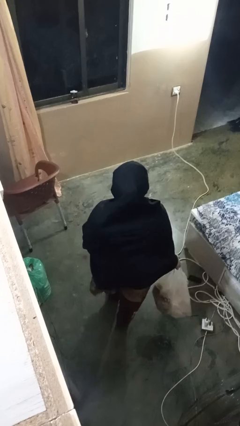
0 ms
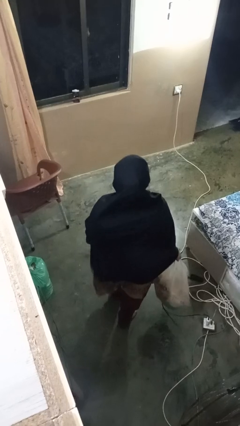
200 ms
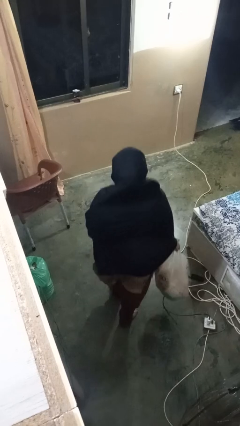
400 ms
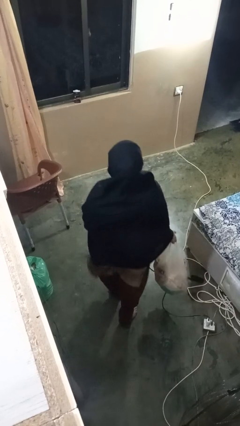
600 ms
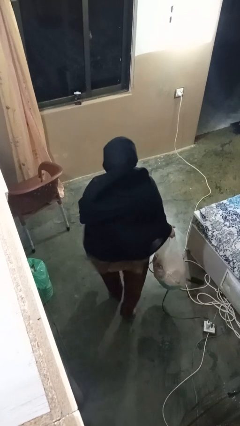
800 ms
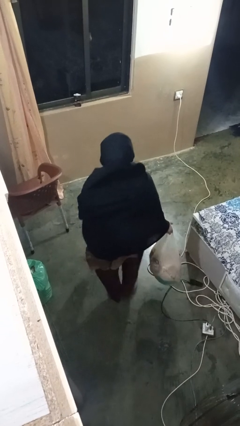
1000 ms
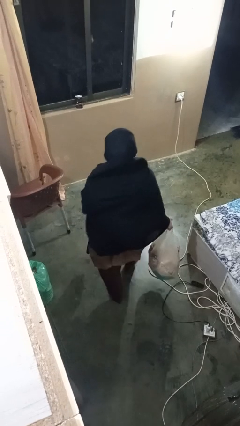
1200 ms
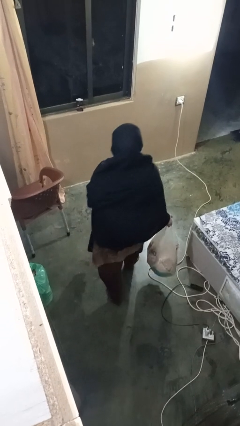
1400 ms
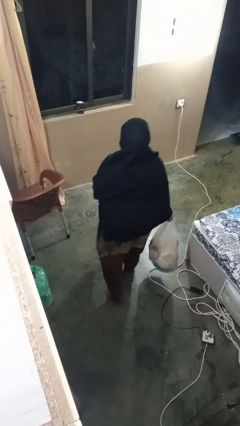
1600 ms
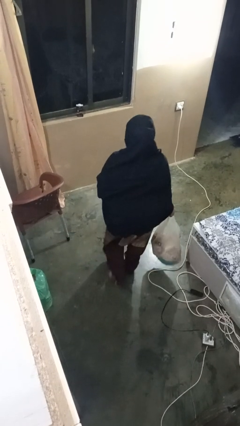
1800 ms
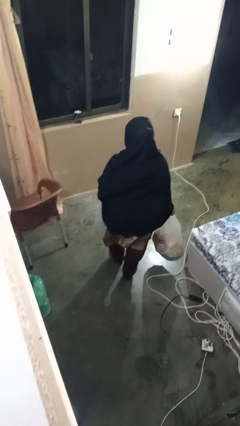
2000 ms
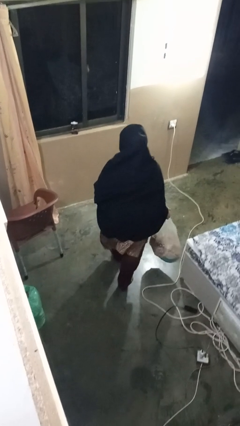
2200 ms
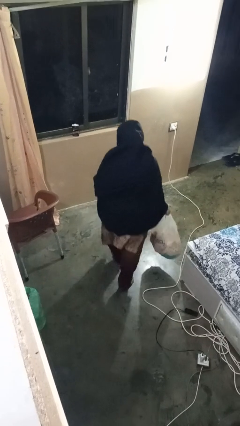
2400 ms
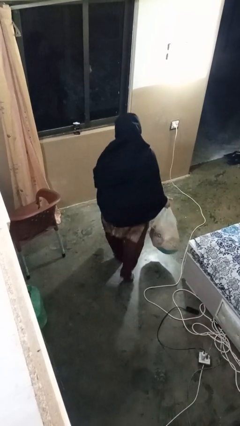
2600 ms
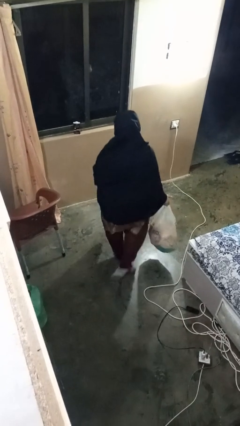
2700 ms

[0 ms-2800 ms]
person carries groceries

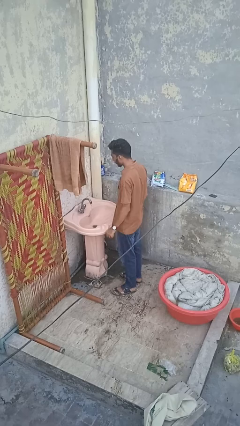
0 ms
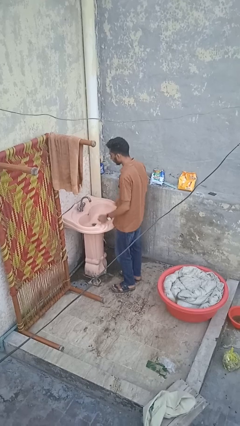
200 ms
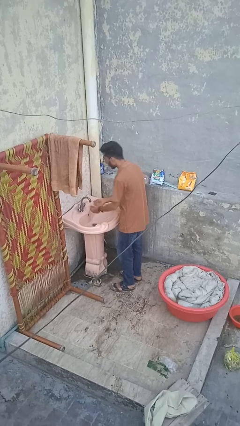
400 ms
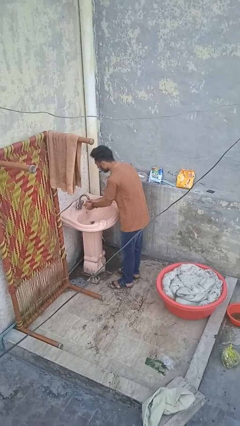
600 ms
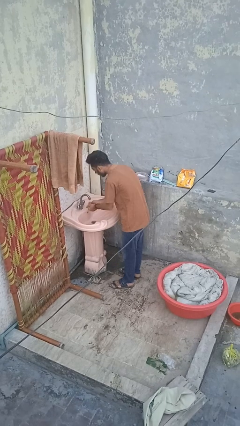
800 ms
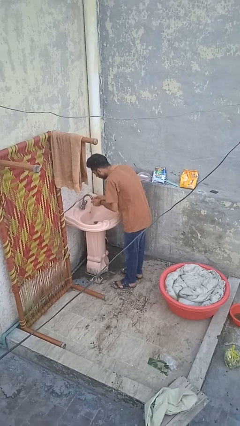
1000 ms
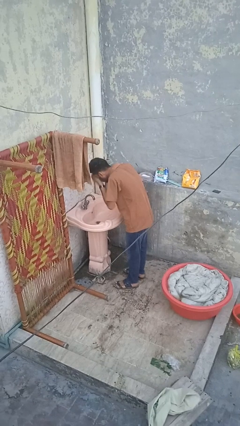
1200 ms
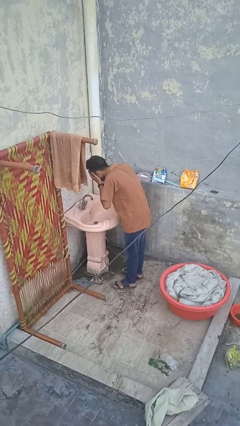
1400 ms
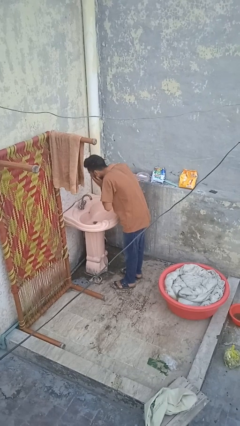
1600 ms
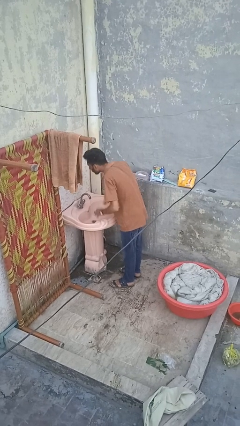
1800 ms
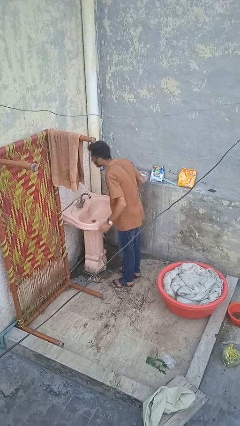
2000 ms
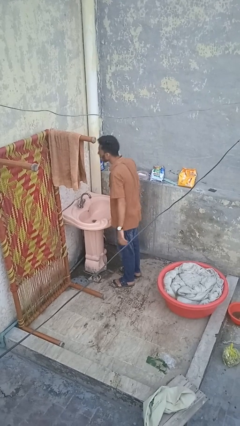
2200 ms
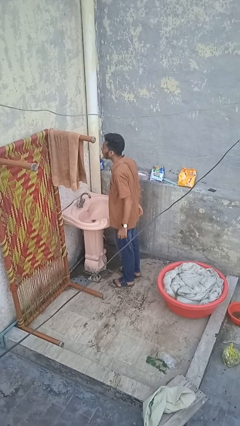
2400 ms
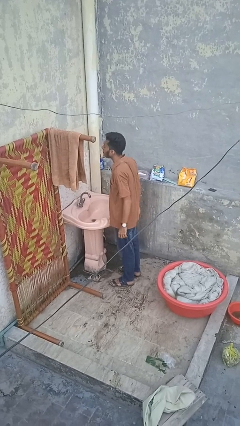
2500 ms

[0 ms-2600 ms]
person washes face

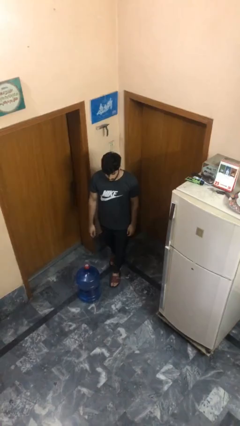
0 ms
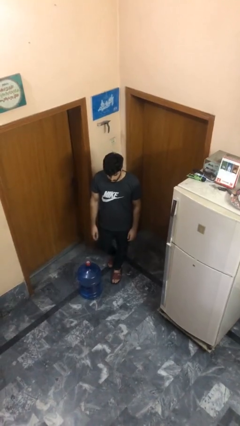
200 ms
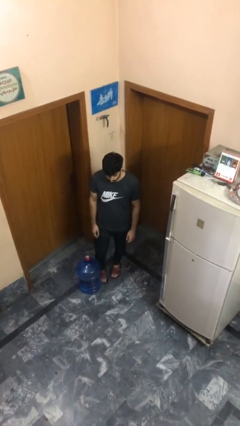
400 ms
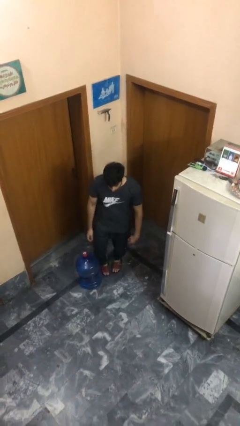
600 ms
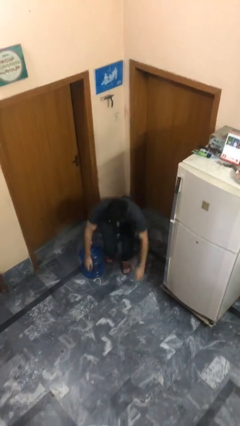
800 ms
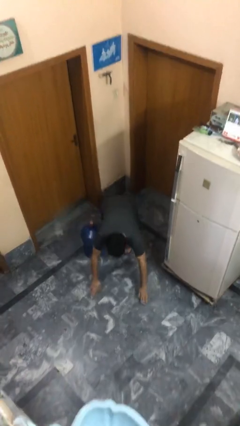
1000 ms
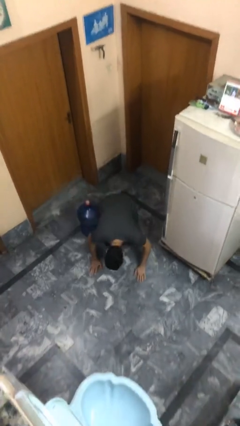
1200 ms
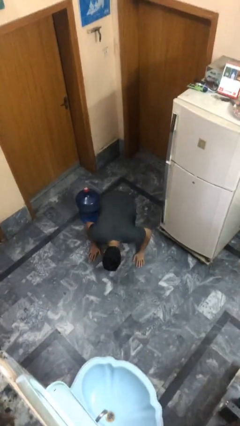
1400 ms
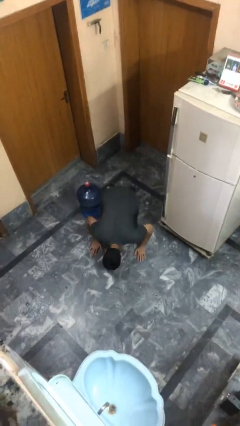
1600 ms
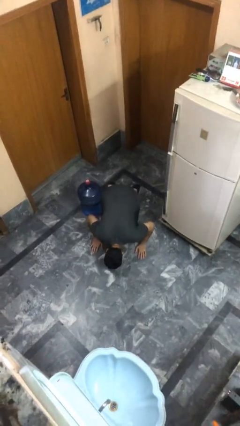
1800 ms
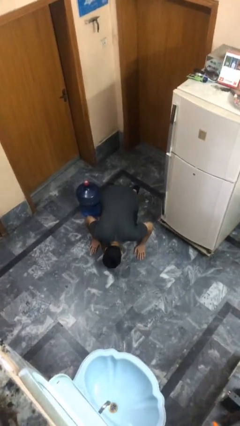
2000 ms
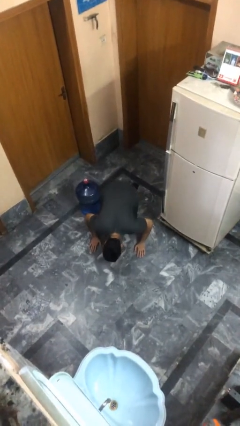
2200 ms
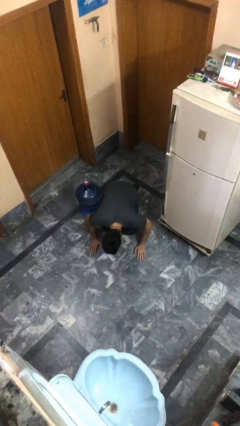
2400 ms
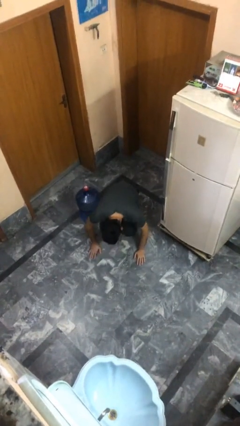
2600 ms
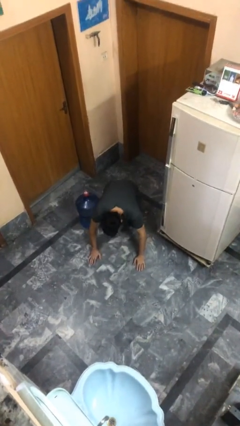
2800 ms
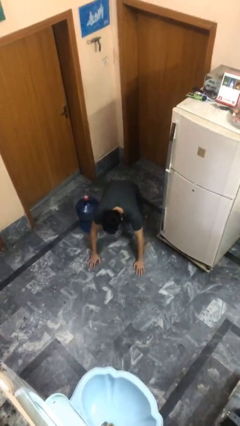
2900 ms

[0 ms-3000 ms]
person trips on object on floor

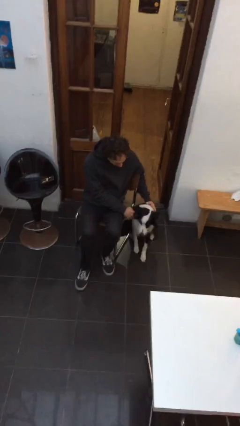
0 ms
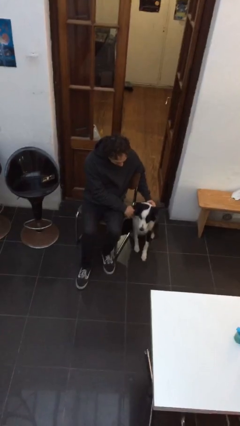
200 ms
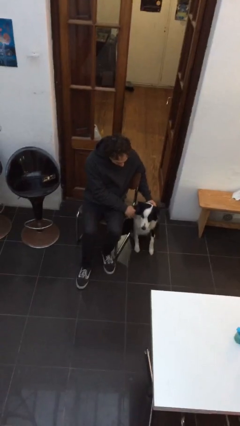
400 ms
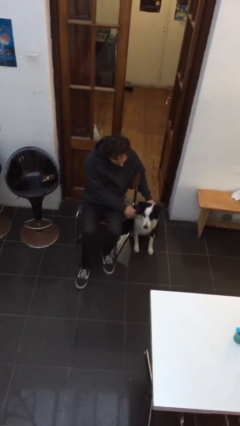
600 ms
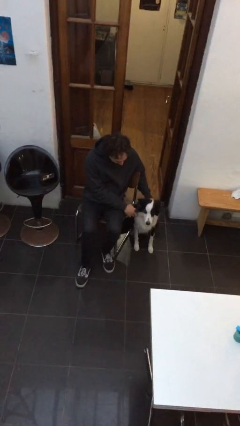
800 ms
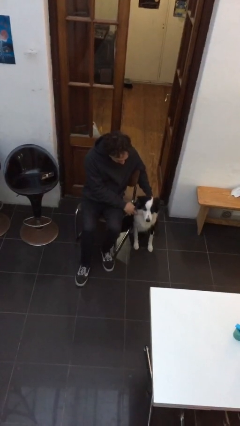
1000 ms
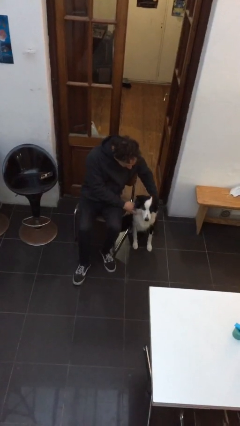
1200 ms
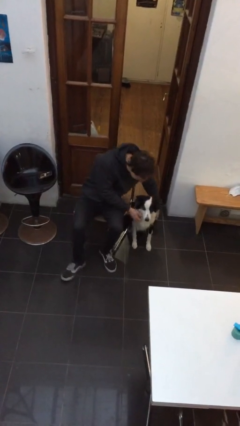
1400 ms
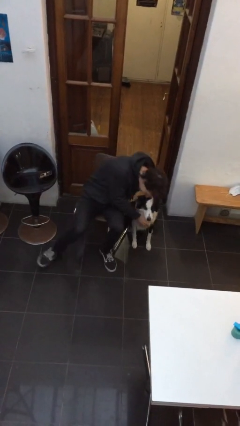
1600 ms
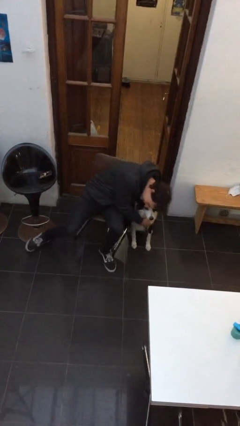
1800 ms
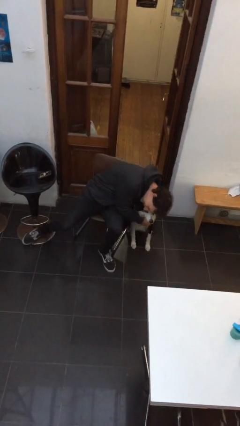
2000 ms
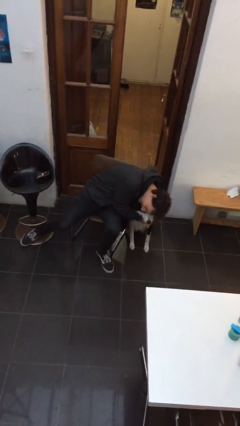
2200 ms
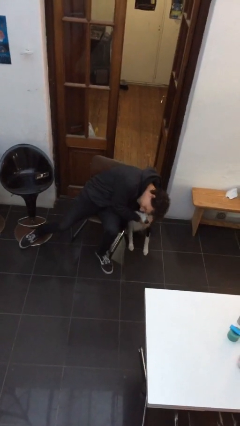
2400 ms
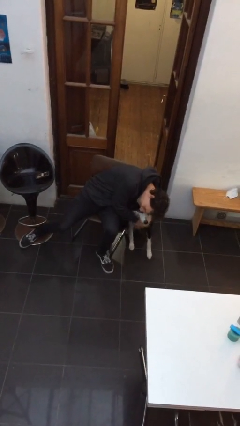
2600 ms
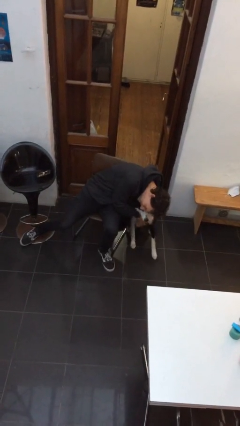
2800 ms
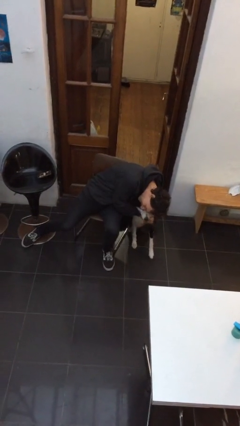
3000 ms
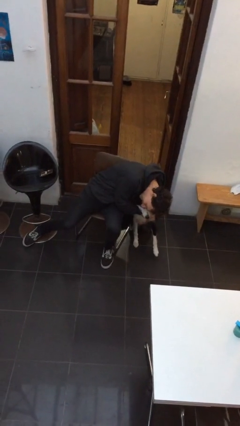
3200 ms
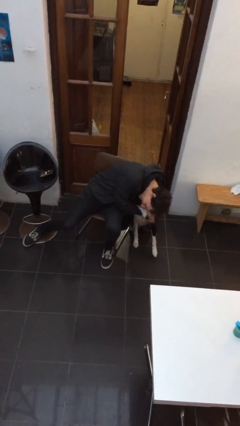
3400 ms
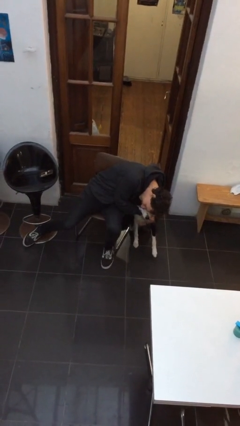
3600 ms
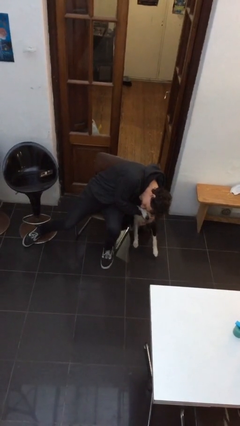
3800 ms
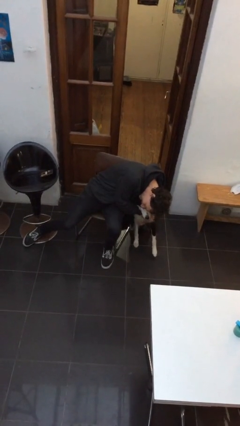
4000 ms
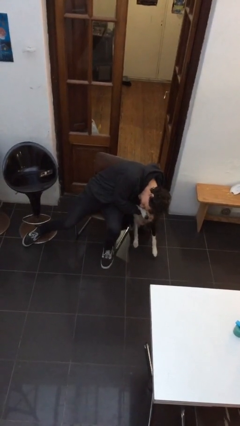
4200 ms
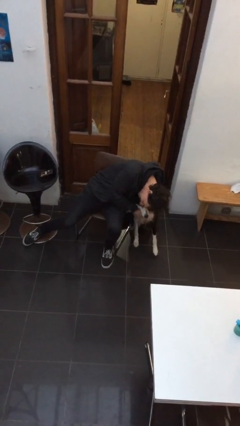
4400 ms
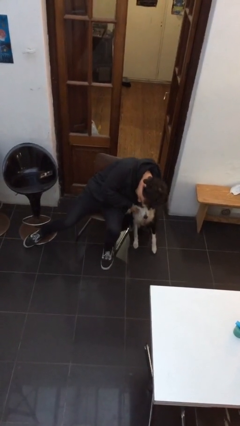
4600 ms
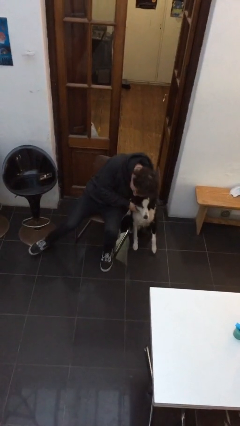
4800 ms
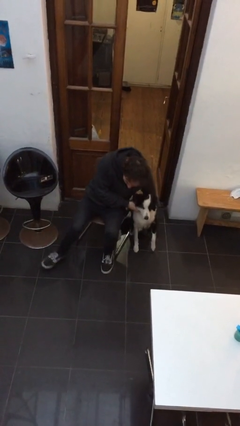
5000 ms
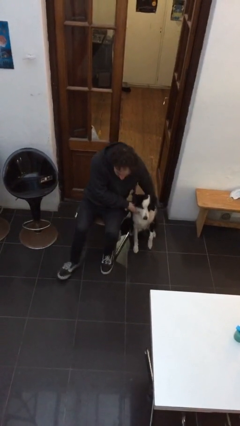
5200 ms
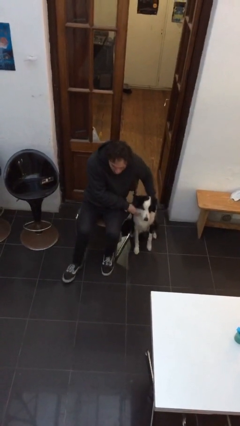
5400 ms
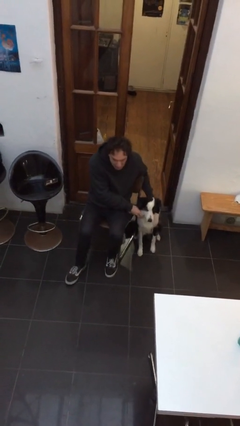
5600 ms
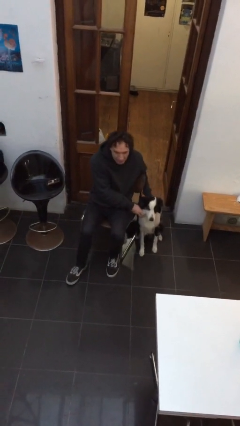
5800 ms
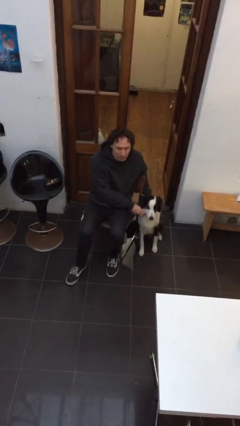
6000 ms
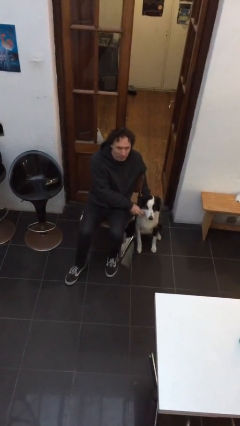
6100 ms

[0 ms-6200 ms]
person hugs dog

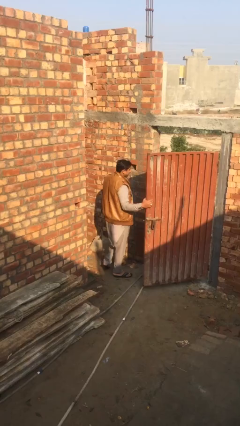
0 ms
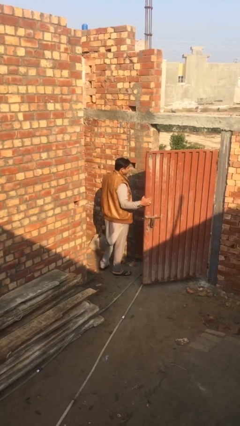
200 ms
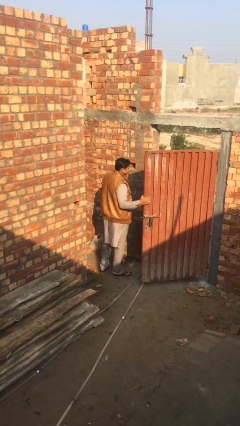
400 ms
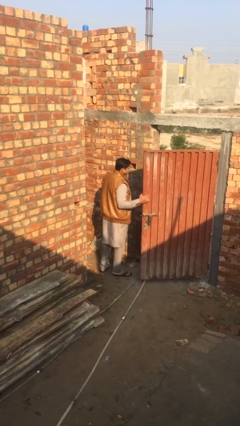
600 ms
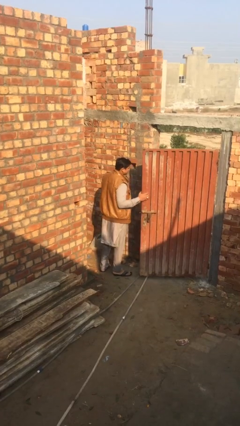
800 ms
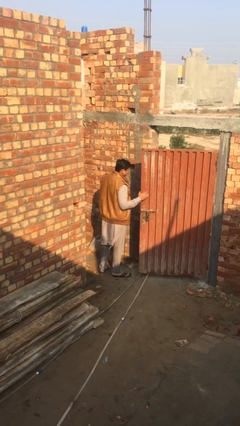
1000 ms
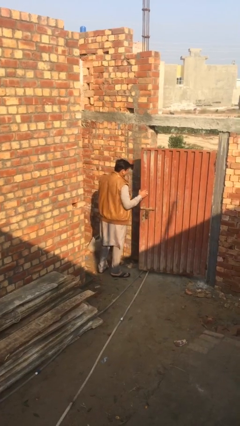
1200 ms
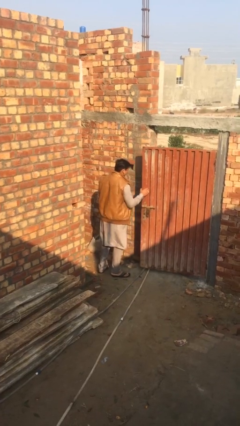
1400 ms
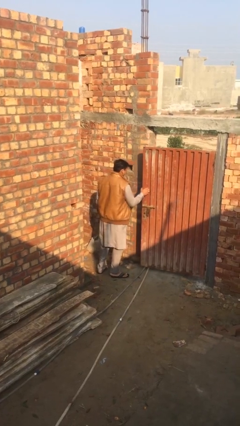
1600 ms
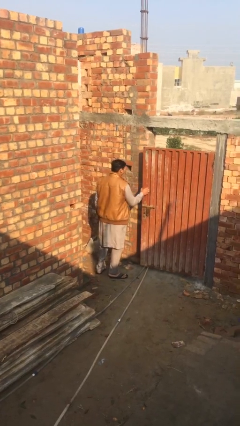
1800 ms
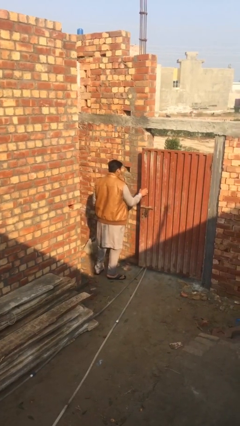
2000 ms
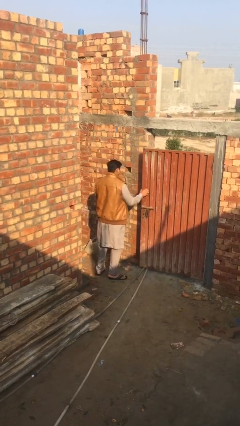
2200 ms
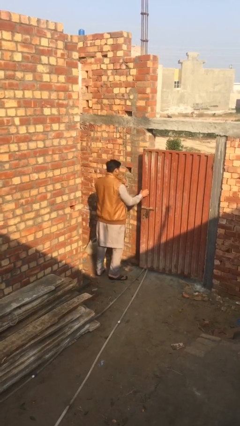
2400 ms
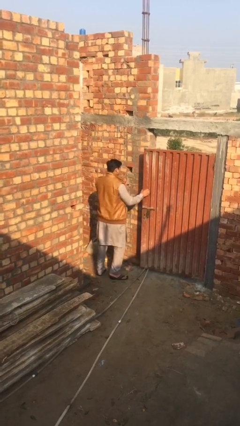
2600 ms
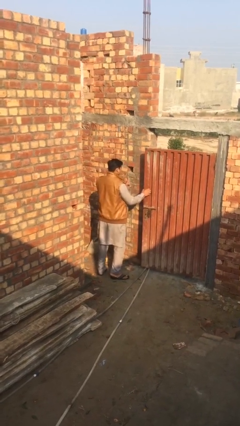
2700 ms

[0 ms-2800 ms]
person closes facility door
